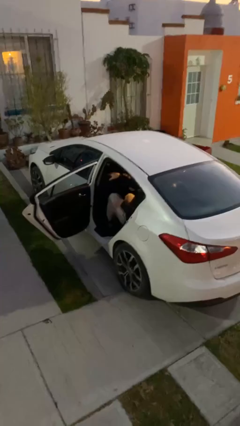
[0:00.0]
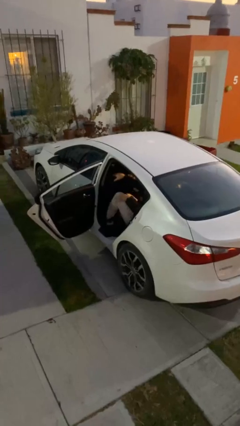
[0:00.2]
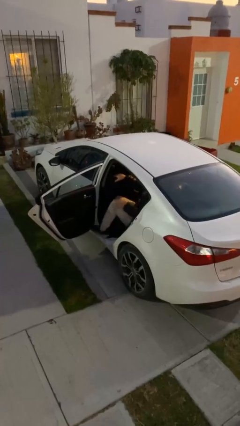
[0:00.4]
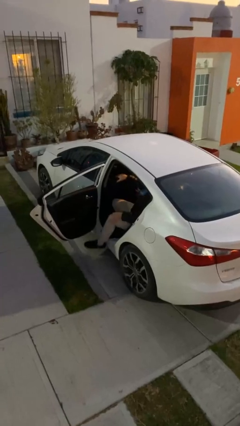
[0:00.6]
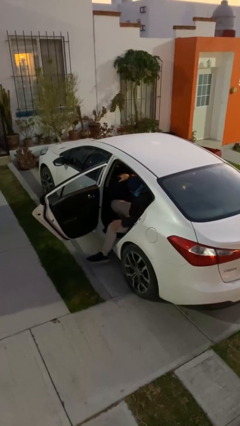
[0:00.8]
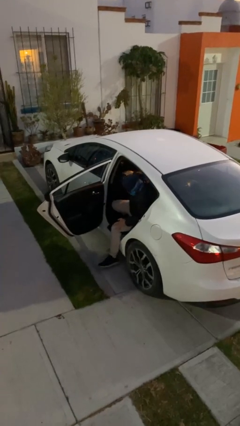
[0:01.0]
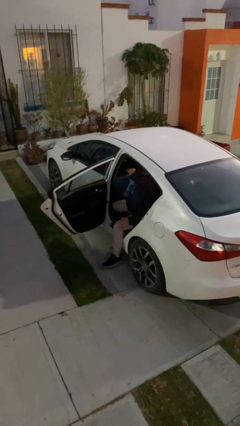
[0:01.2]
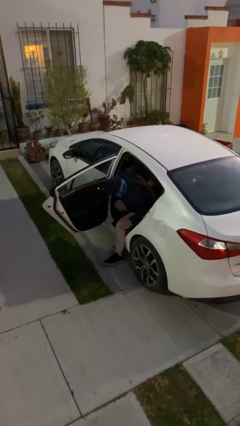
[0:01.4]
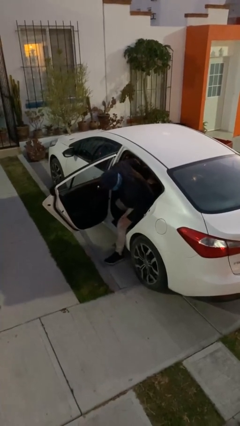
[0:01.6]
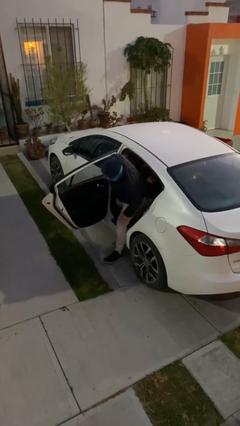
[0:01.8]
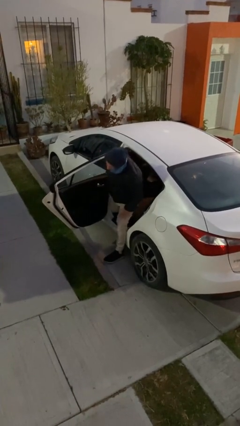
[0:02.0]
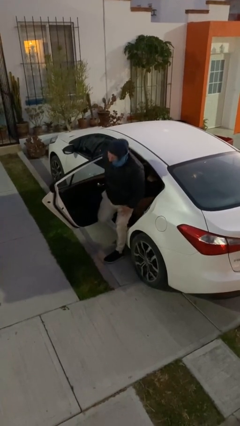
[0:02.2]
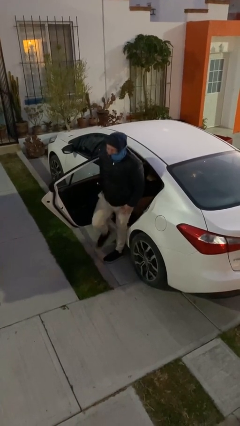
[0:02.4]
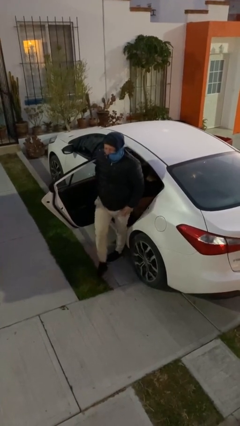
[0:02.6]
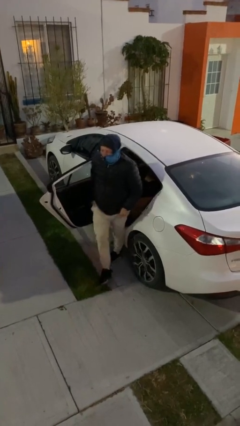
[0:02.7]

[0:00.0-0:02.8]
person exits car

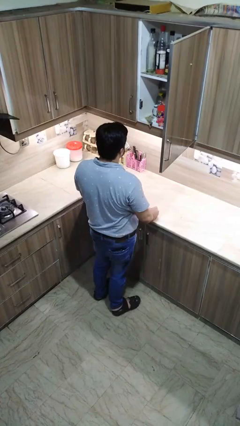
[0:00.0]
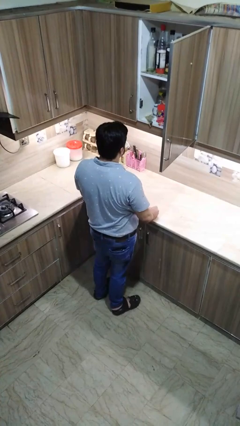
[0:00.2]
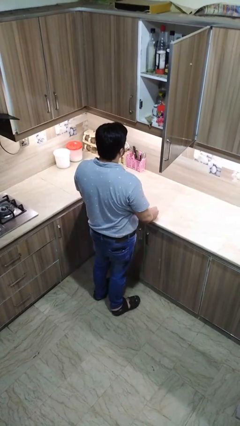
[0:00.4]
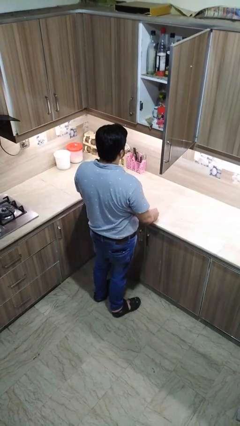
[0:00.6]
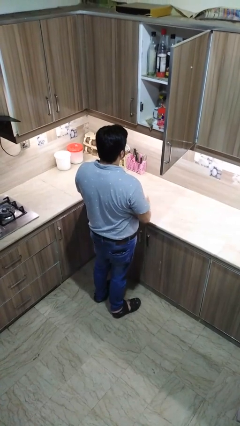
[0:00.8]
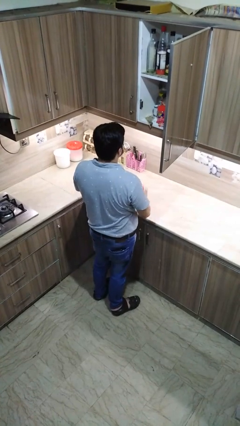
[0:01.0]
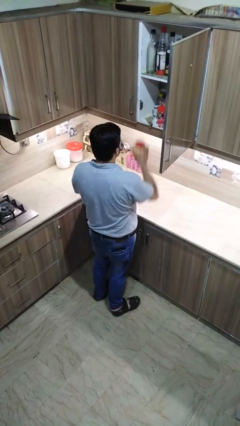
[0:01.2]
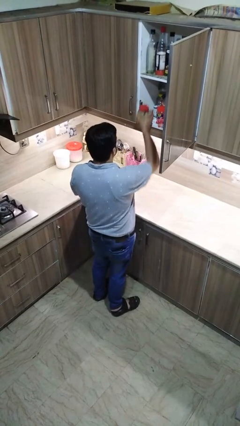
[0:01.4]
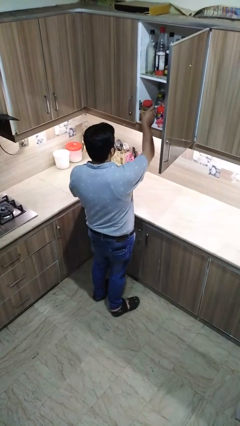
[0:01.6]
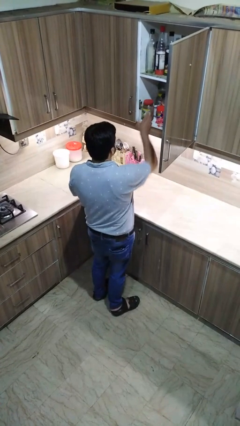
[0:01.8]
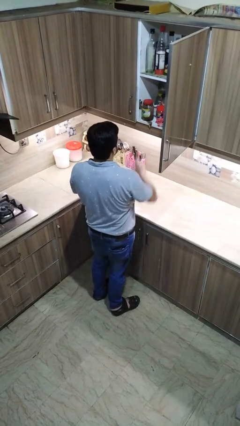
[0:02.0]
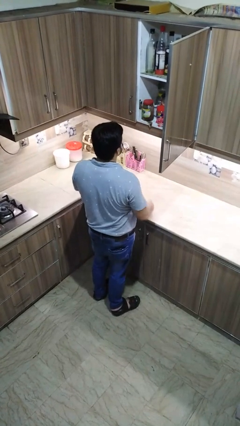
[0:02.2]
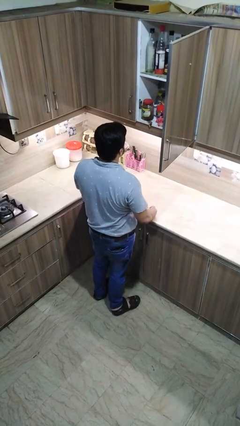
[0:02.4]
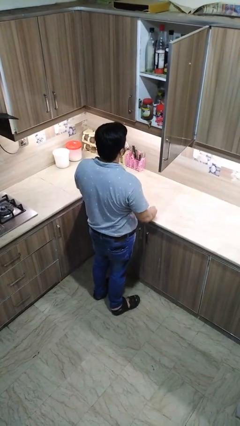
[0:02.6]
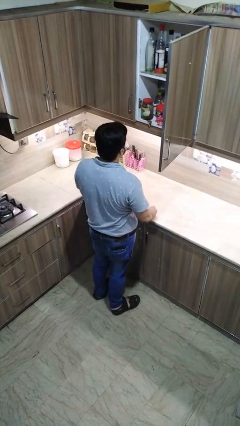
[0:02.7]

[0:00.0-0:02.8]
person takes object from cabinet

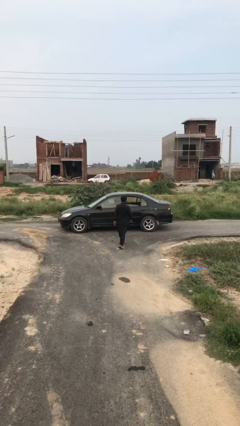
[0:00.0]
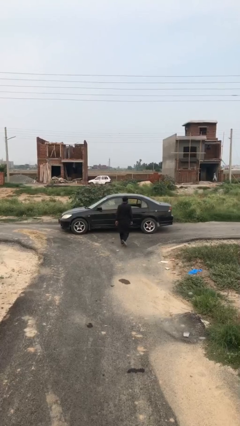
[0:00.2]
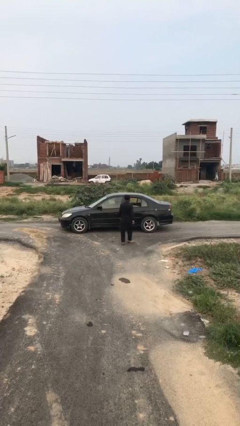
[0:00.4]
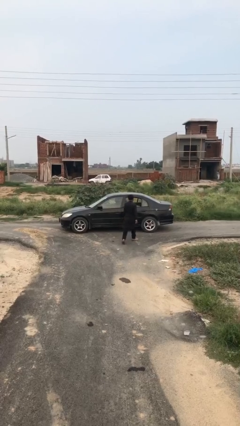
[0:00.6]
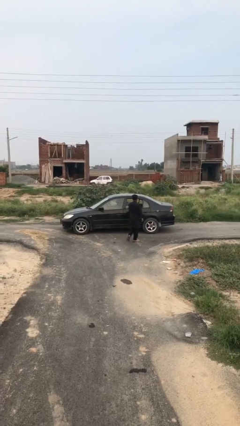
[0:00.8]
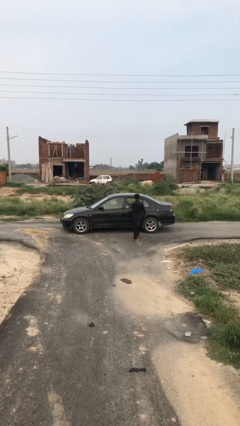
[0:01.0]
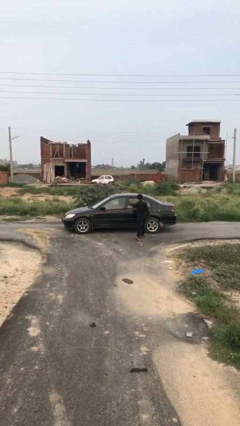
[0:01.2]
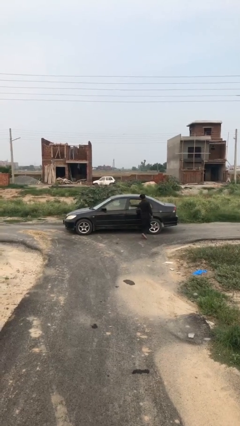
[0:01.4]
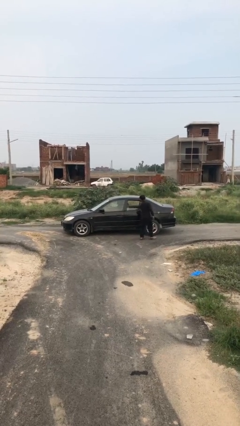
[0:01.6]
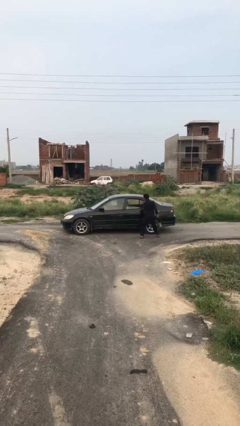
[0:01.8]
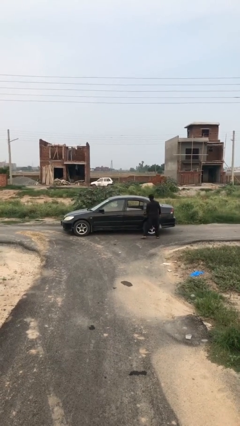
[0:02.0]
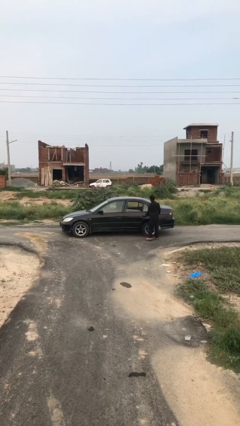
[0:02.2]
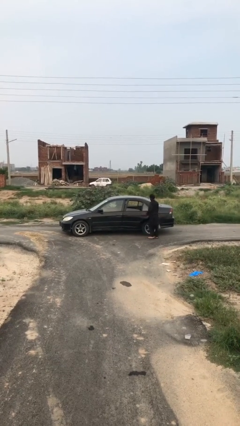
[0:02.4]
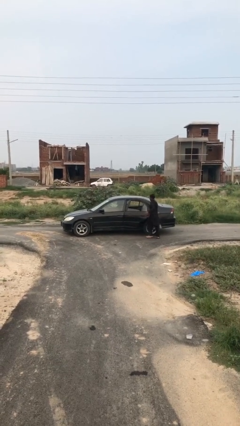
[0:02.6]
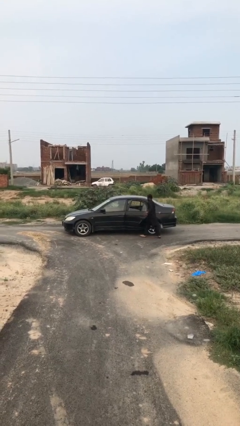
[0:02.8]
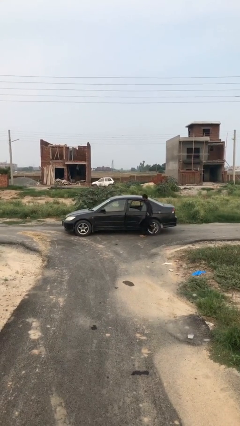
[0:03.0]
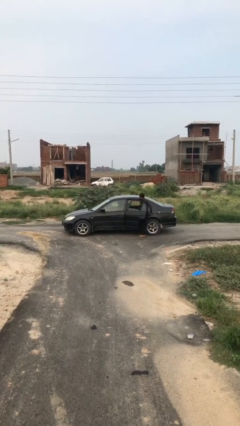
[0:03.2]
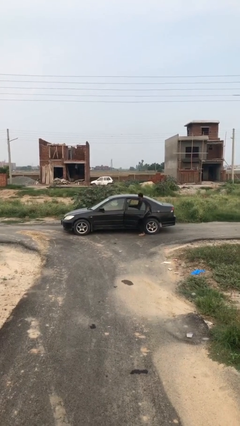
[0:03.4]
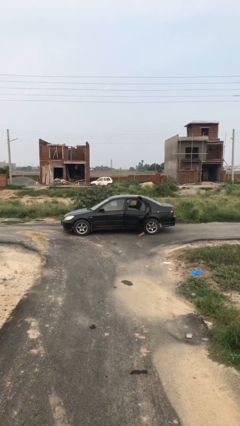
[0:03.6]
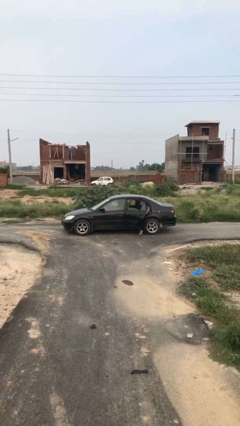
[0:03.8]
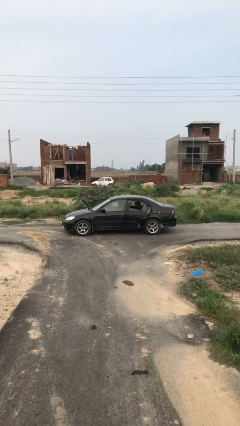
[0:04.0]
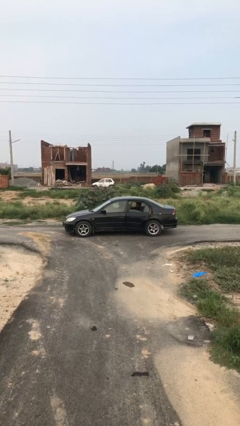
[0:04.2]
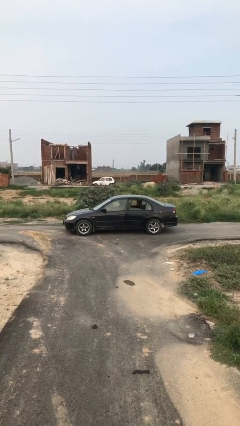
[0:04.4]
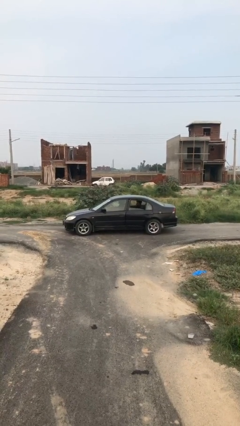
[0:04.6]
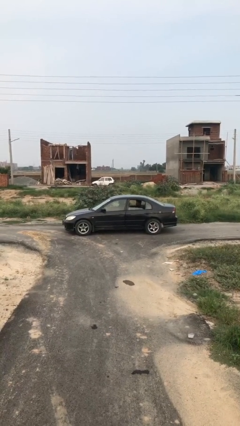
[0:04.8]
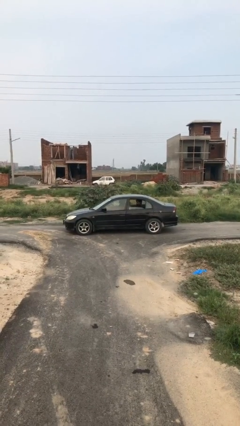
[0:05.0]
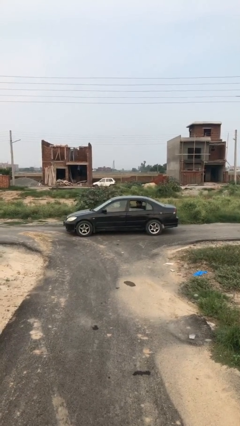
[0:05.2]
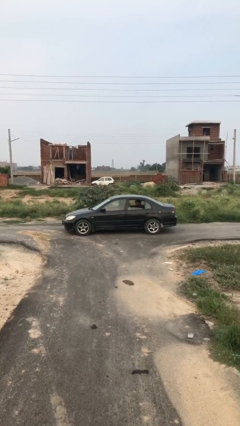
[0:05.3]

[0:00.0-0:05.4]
car picks up person

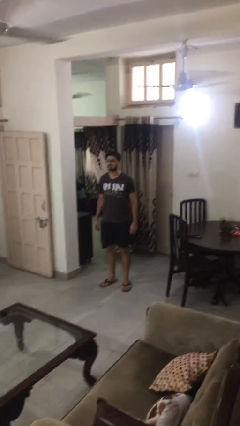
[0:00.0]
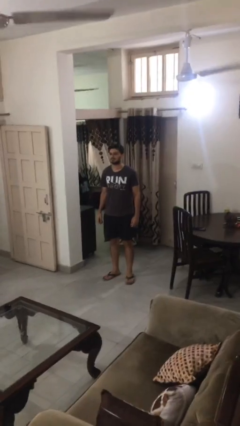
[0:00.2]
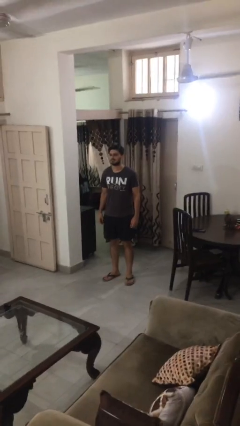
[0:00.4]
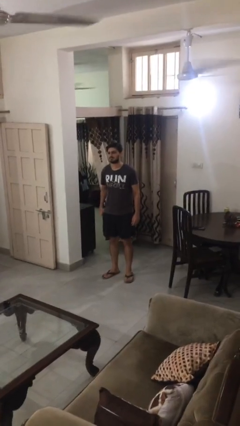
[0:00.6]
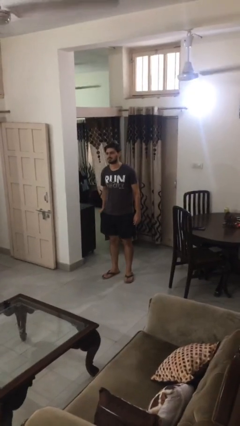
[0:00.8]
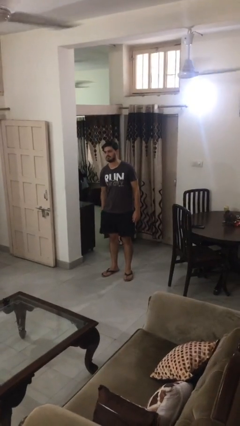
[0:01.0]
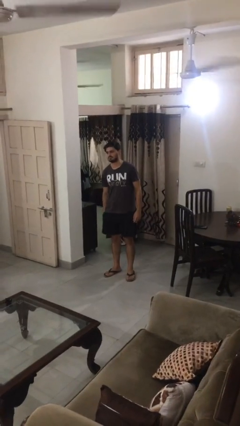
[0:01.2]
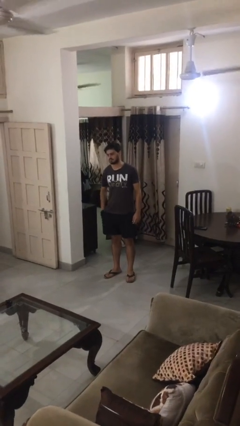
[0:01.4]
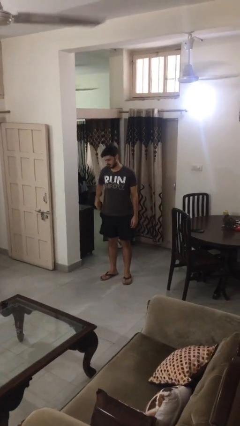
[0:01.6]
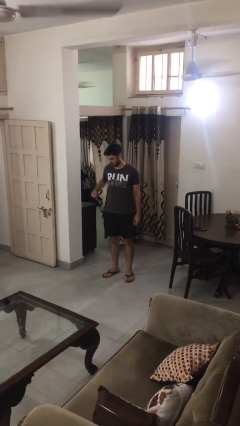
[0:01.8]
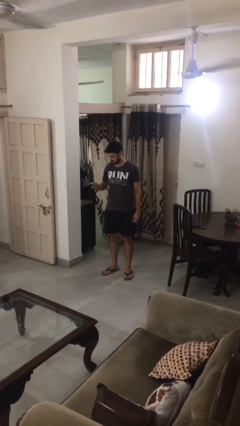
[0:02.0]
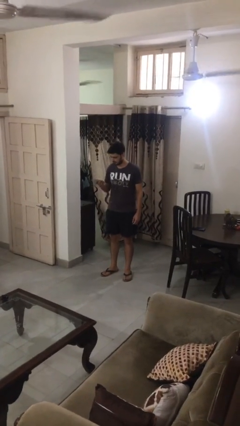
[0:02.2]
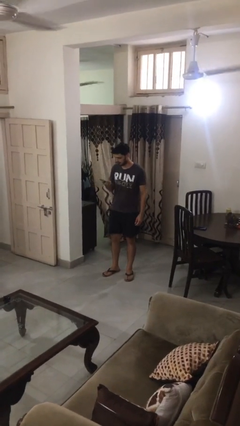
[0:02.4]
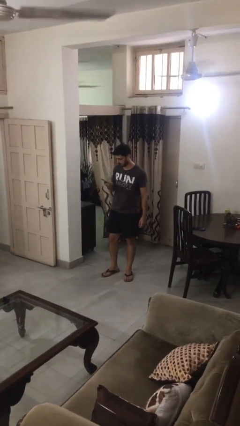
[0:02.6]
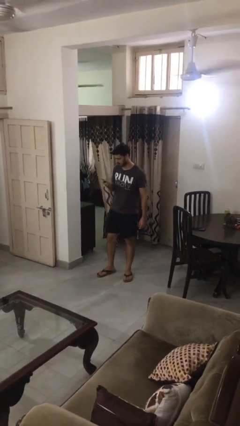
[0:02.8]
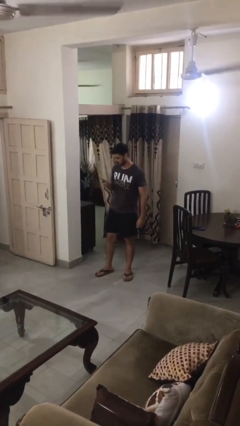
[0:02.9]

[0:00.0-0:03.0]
person takes phone from pocket

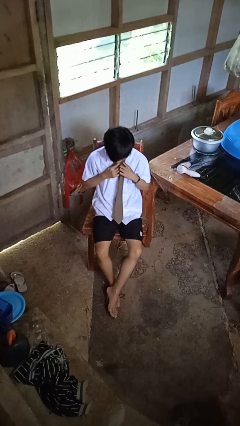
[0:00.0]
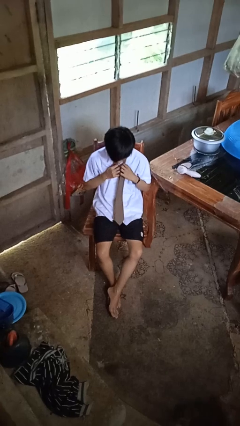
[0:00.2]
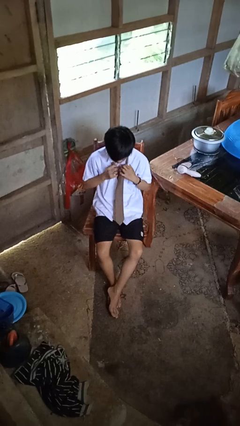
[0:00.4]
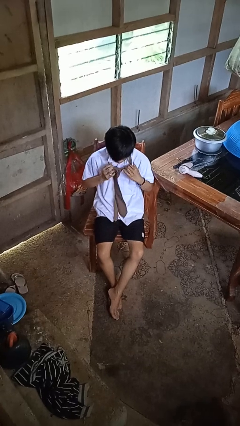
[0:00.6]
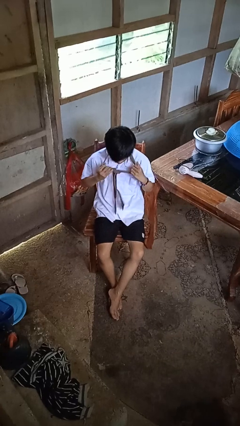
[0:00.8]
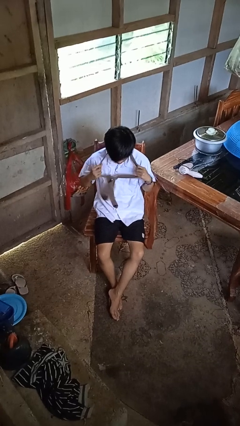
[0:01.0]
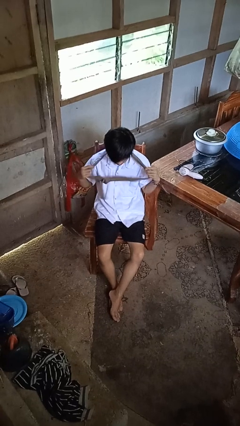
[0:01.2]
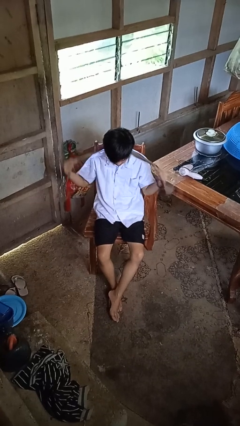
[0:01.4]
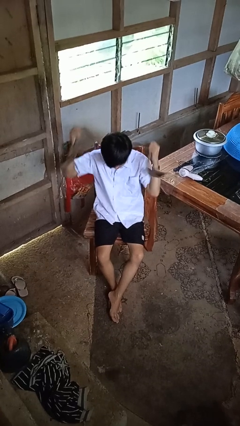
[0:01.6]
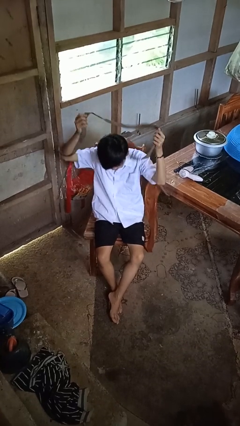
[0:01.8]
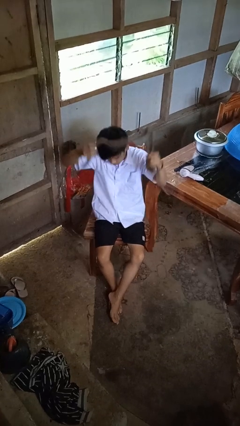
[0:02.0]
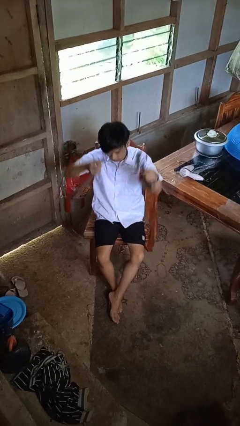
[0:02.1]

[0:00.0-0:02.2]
person takes off necktie

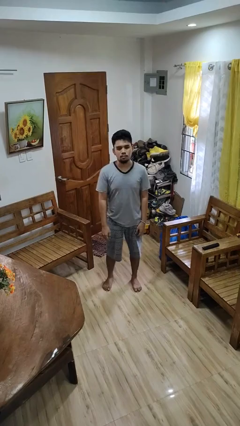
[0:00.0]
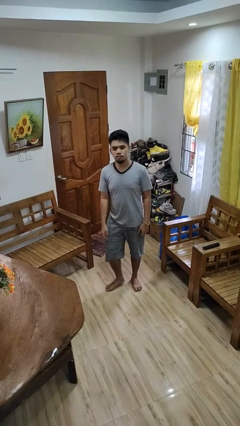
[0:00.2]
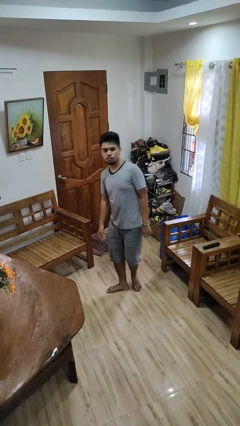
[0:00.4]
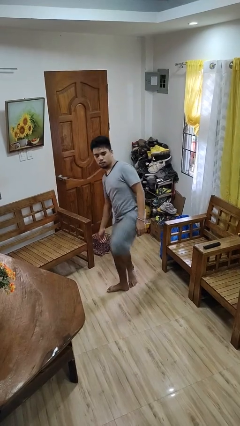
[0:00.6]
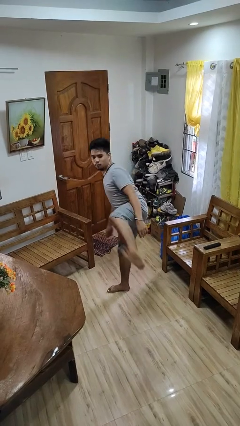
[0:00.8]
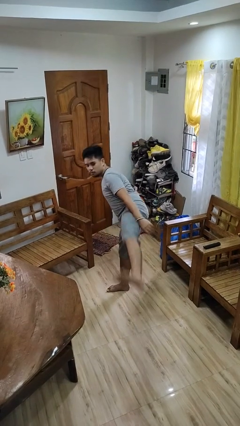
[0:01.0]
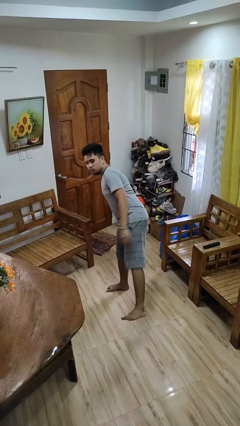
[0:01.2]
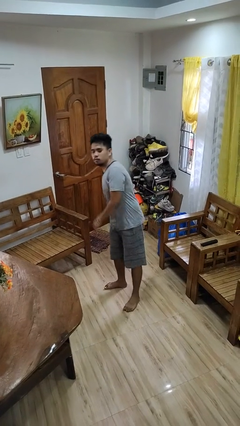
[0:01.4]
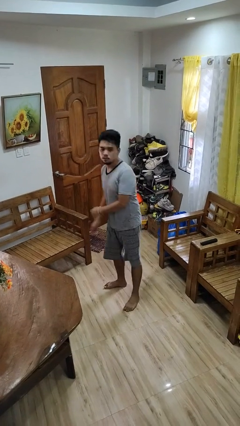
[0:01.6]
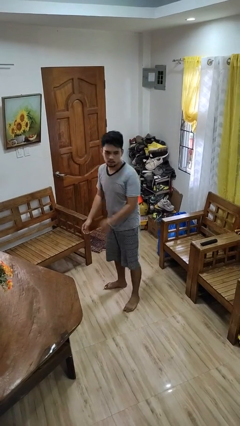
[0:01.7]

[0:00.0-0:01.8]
person karate kicks
